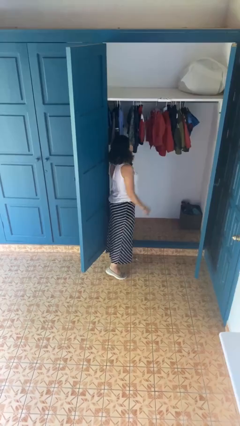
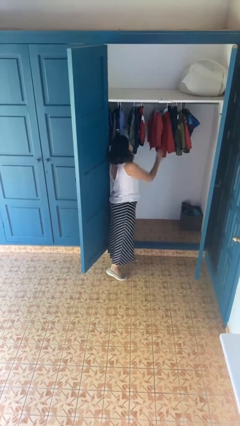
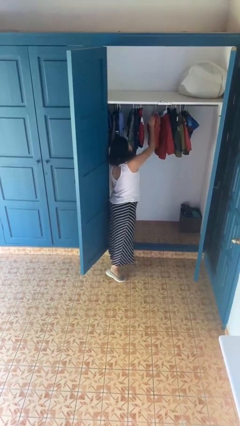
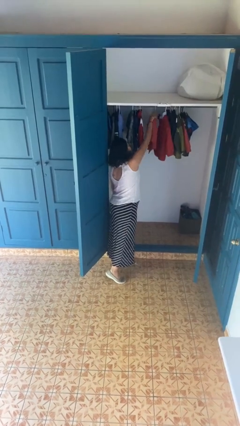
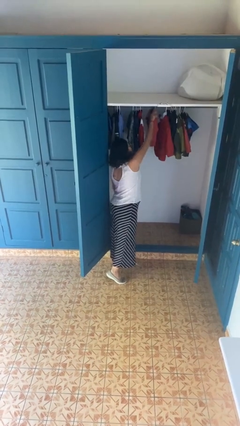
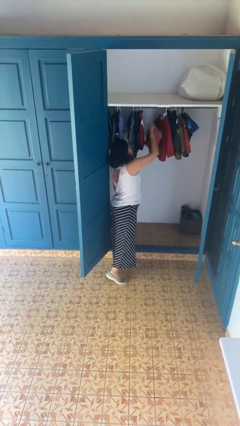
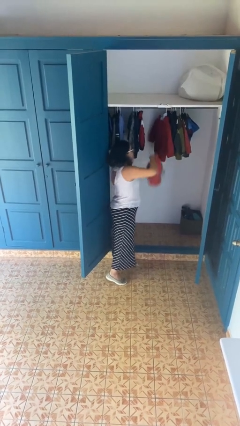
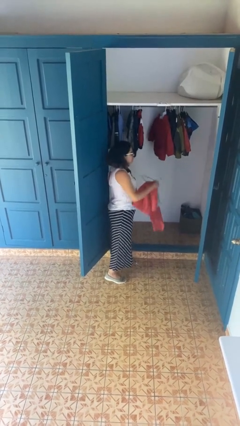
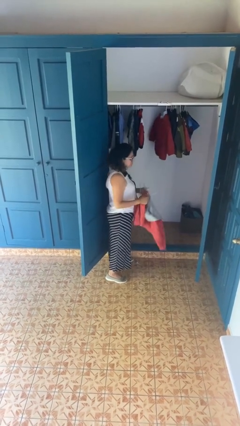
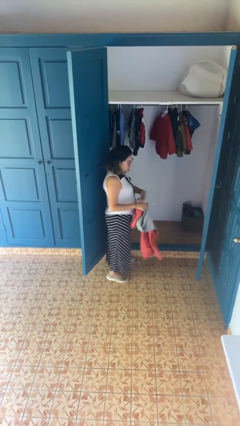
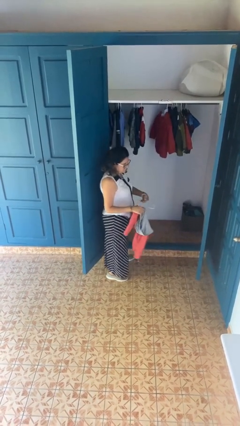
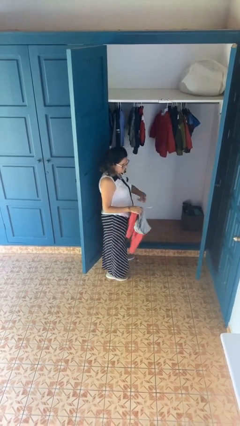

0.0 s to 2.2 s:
person takes clothes from closet

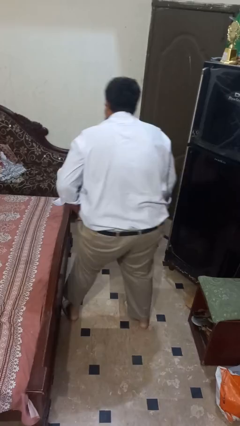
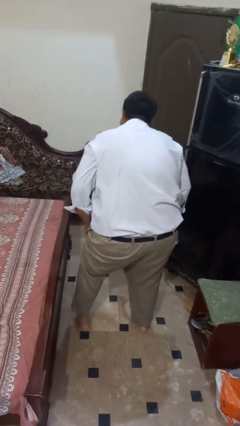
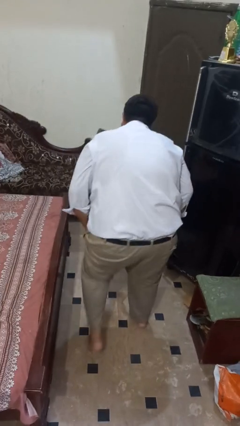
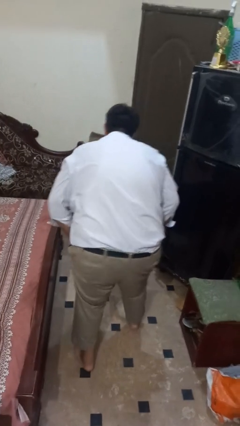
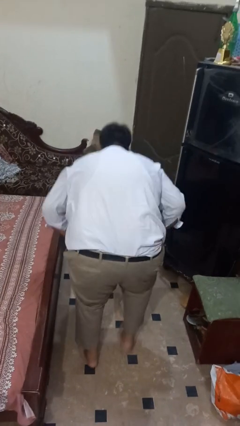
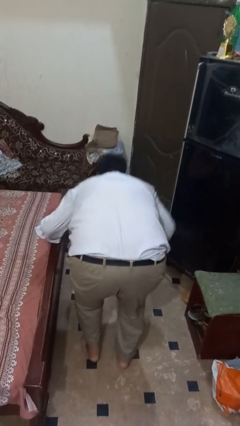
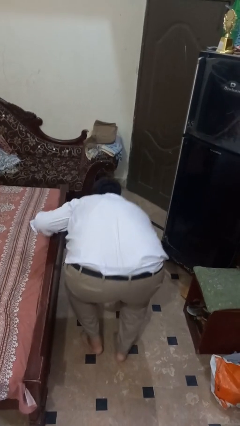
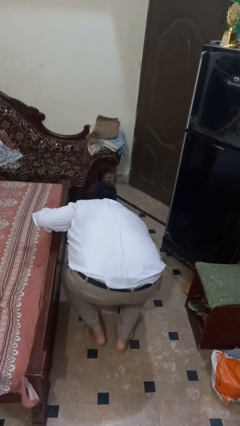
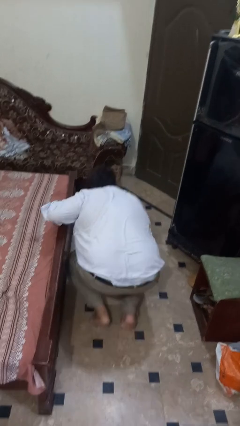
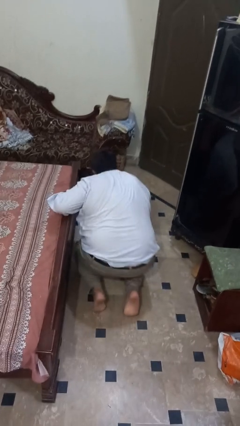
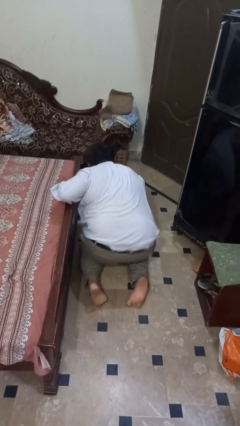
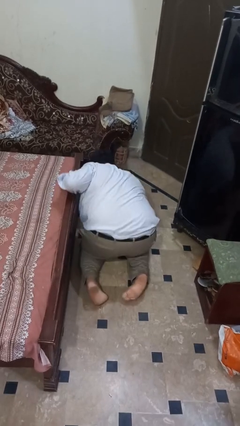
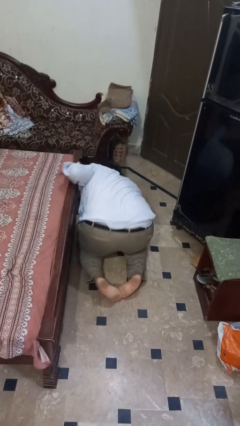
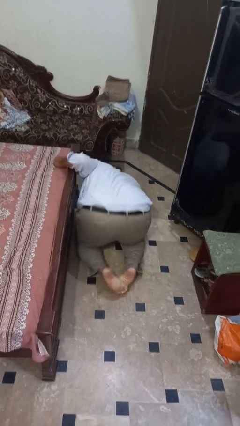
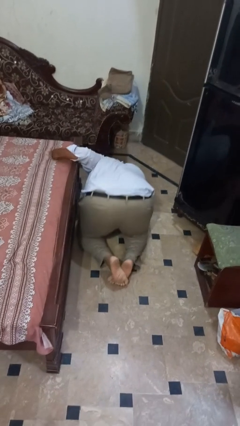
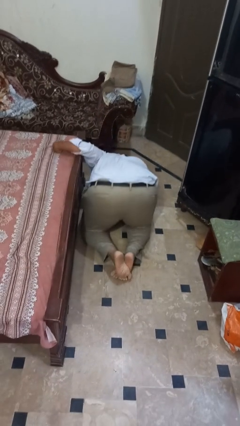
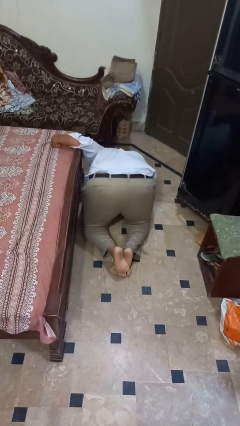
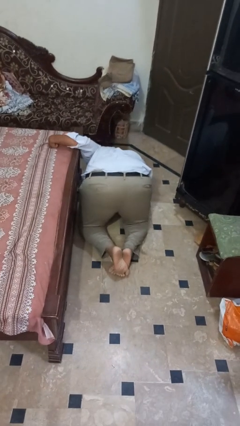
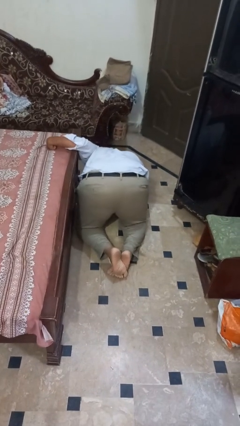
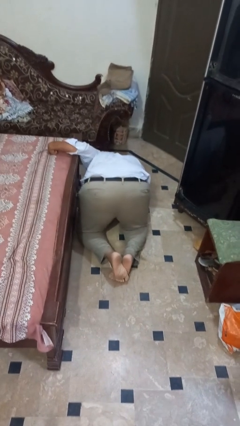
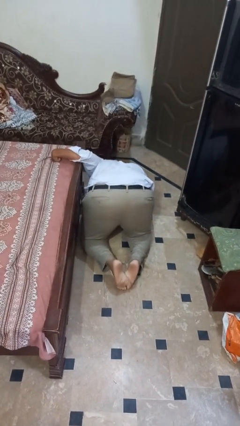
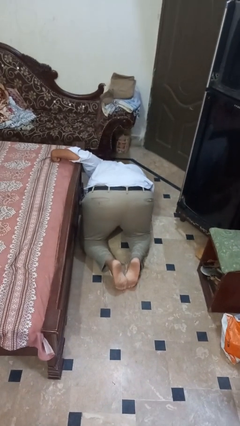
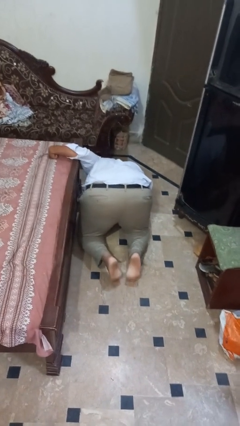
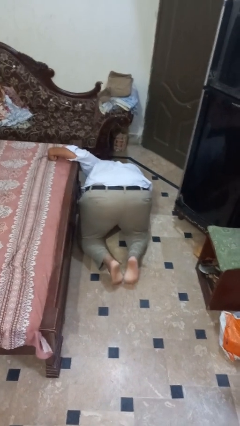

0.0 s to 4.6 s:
person lies down on floor

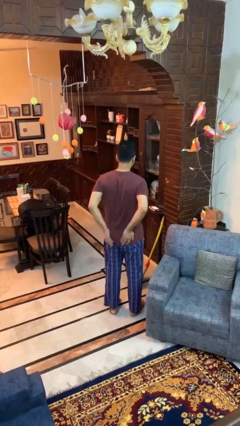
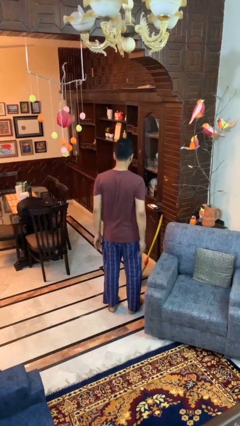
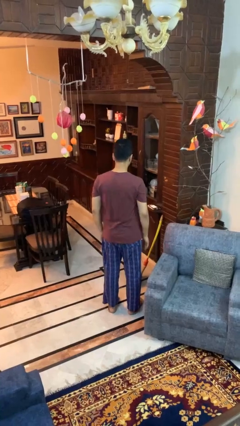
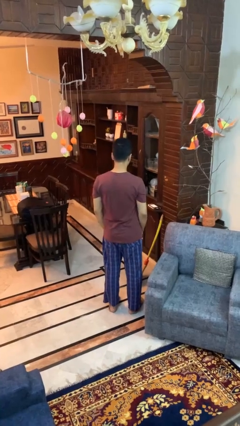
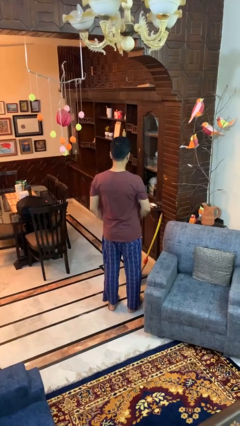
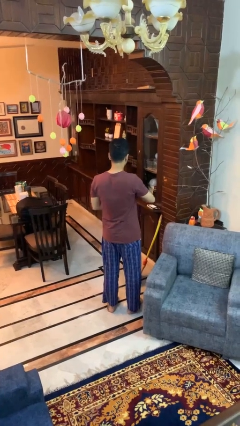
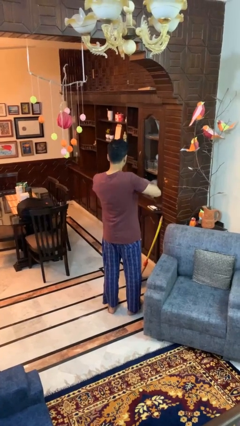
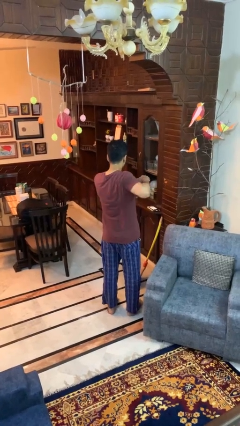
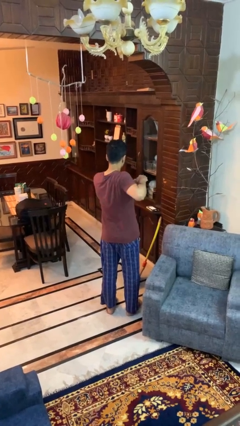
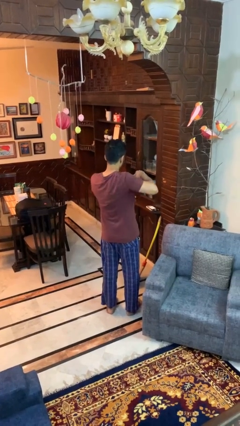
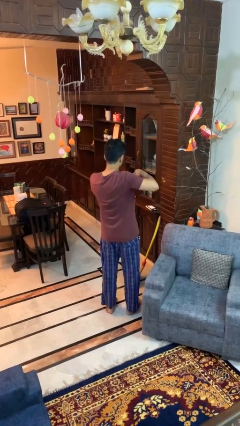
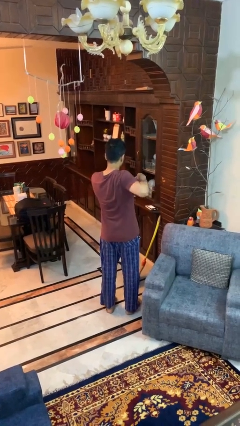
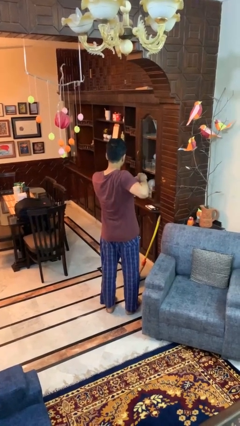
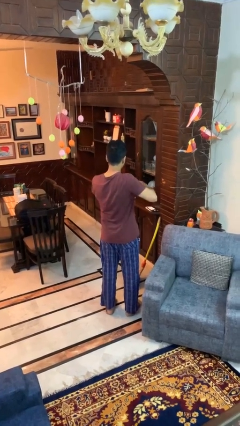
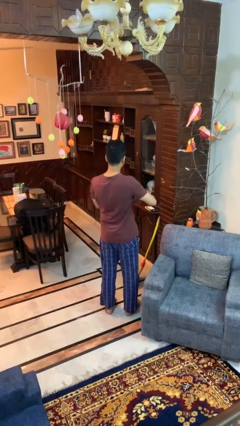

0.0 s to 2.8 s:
person stretches arms to side

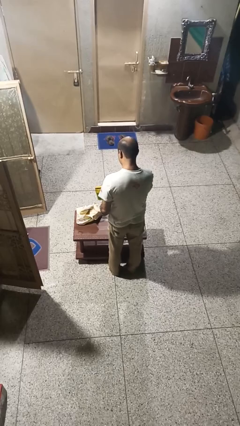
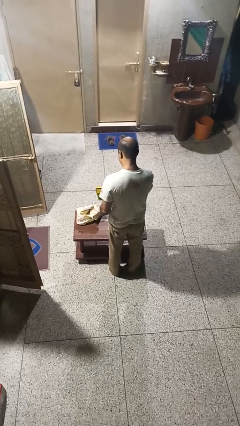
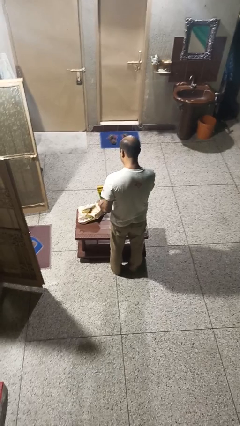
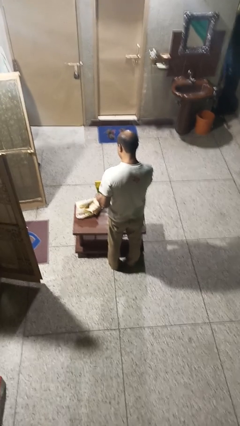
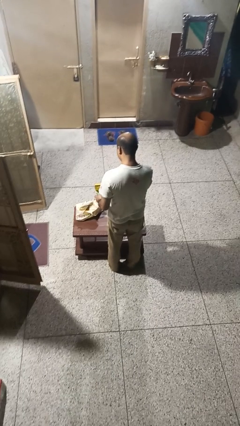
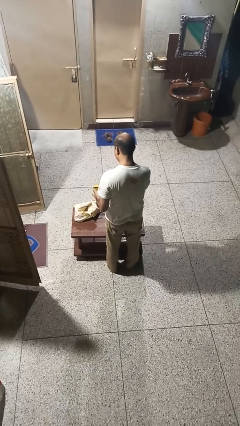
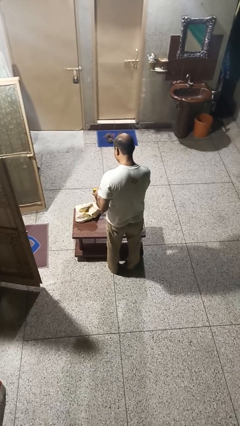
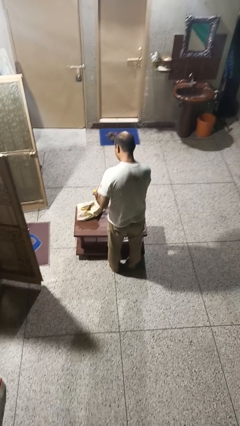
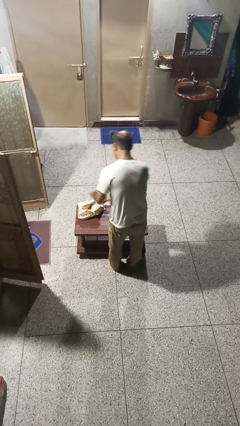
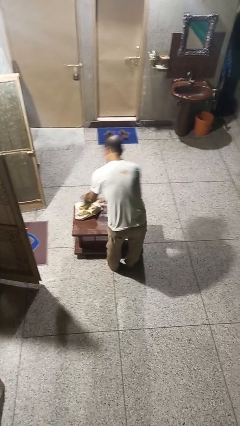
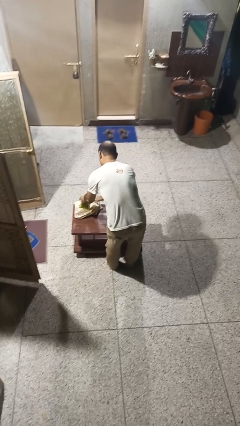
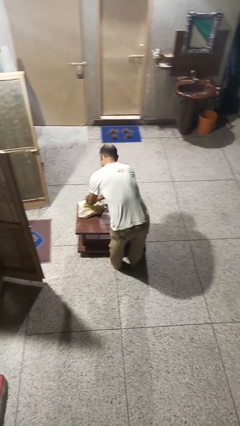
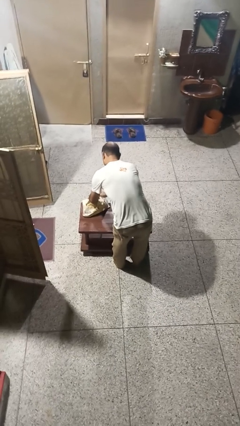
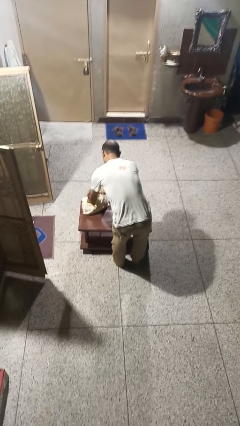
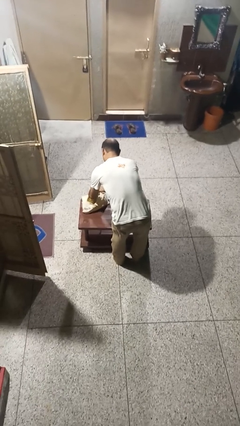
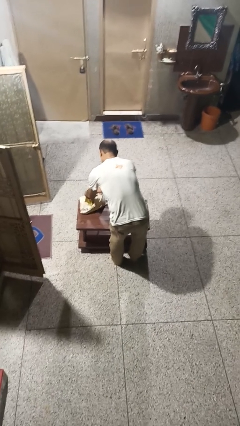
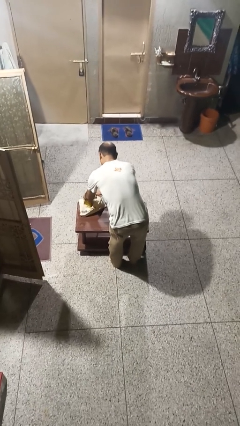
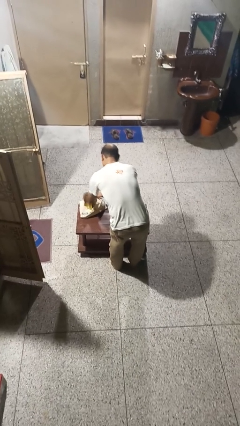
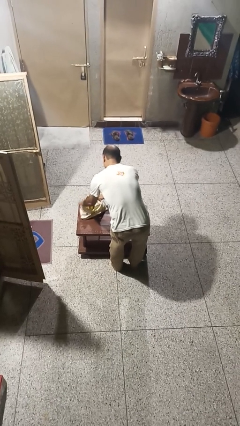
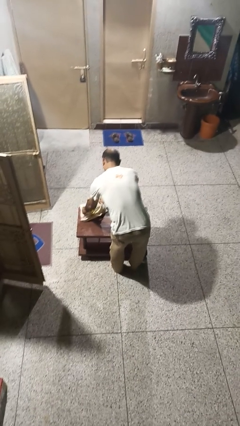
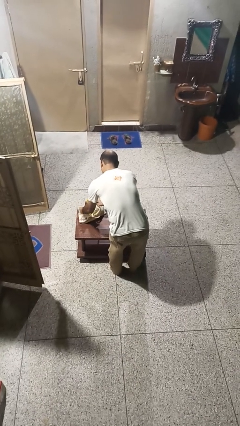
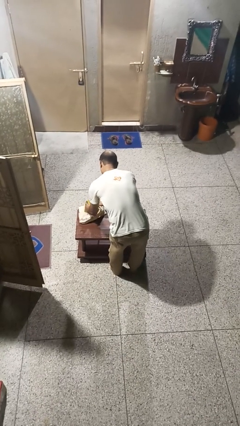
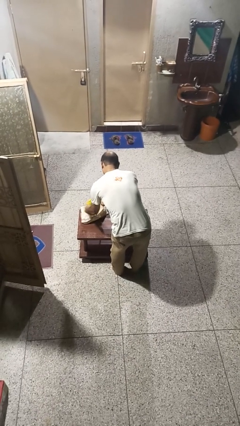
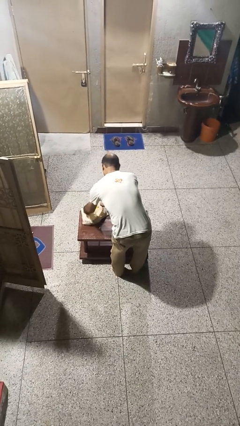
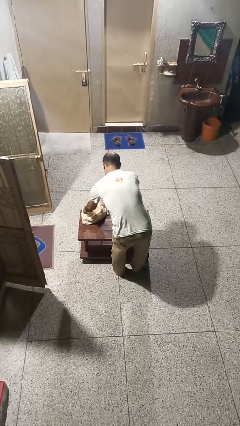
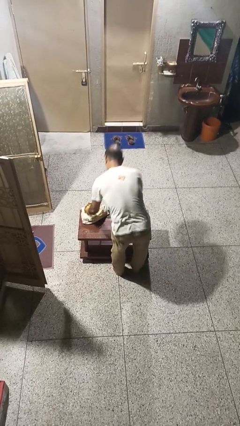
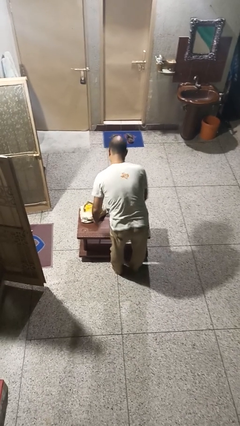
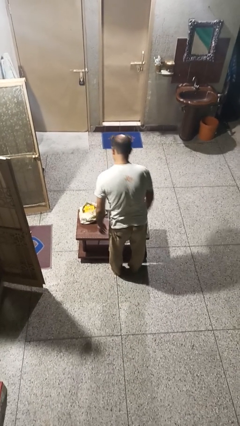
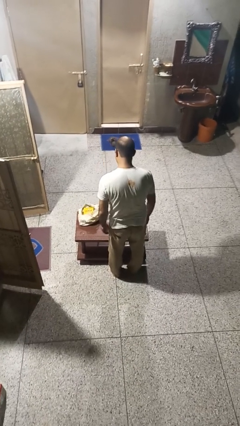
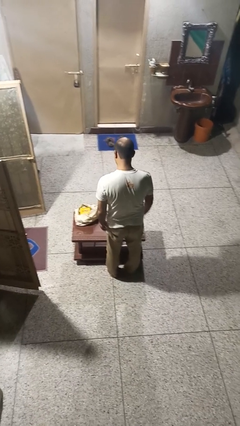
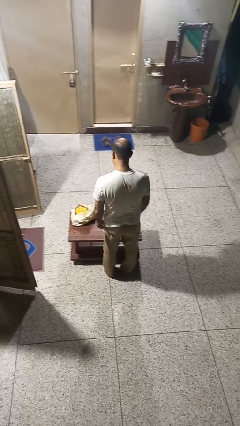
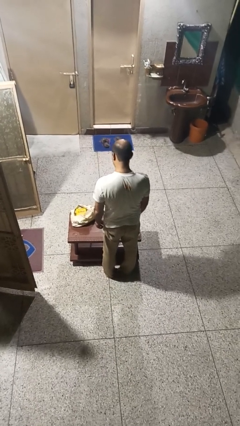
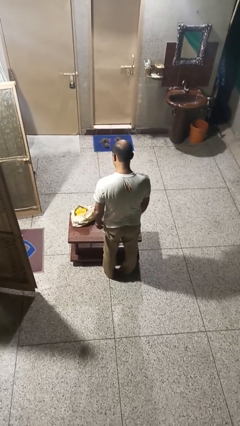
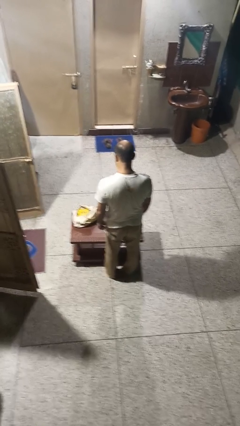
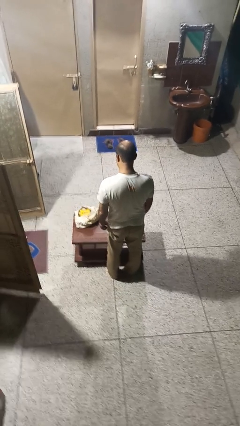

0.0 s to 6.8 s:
person puts object into bag

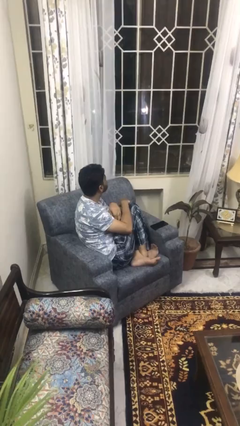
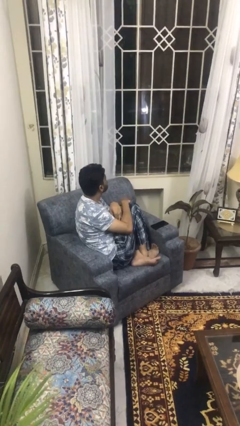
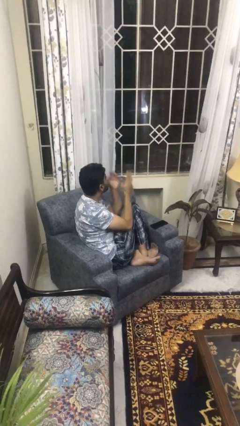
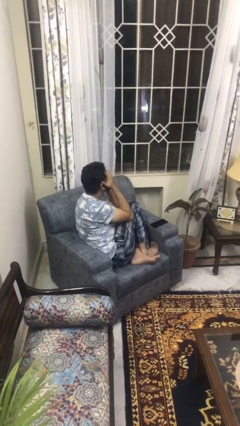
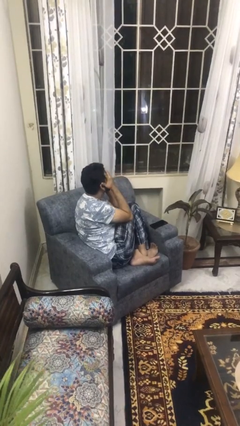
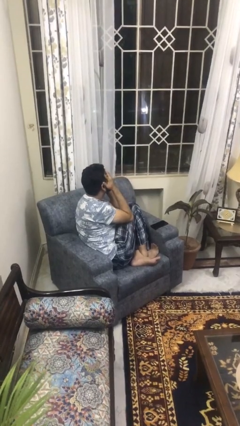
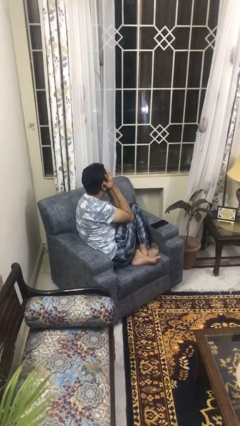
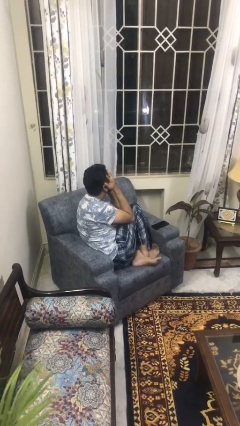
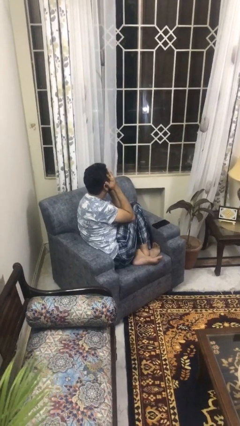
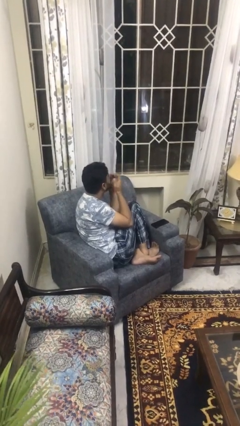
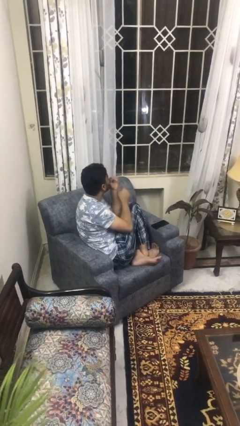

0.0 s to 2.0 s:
person covers face with hands
